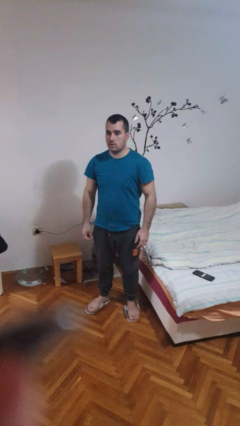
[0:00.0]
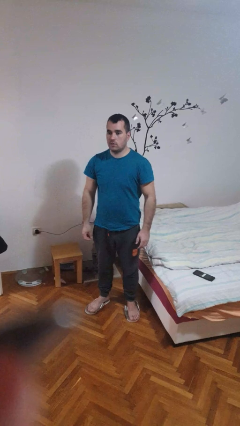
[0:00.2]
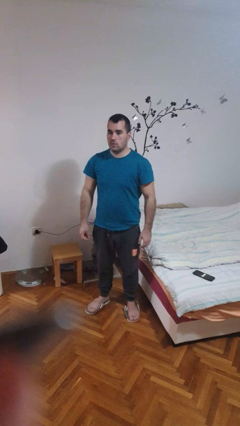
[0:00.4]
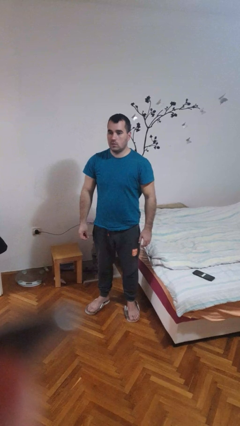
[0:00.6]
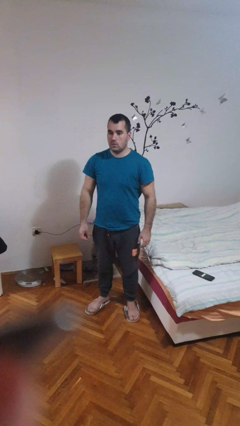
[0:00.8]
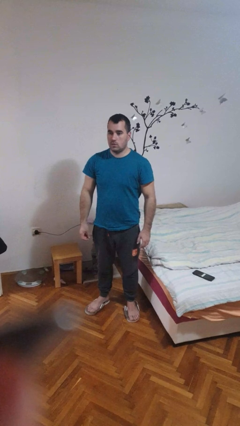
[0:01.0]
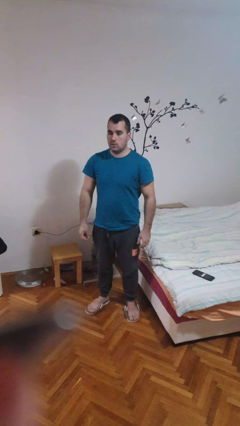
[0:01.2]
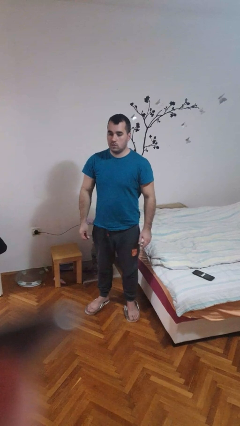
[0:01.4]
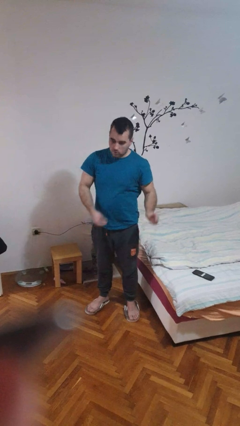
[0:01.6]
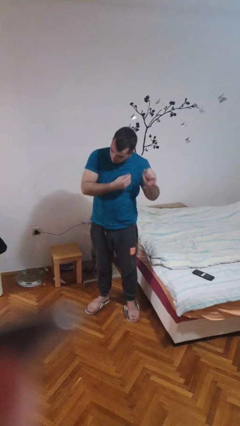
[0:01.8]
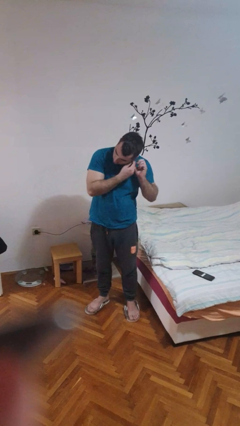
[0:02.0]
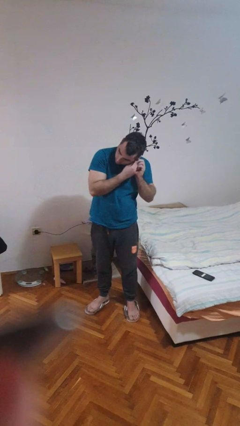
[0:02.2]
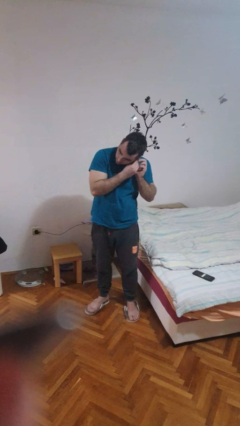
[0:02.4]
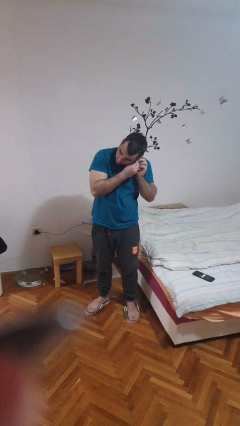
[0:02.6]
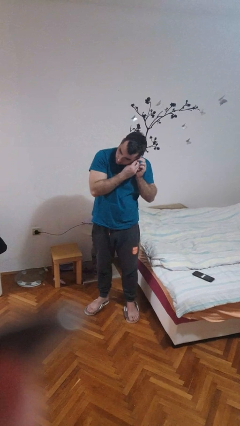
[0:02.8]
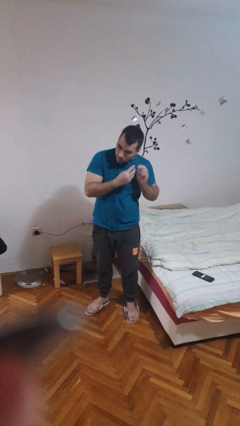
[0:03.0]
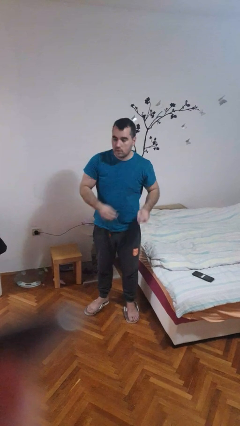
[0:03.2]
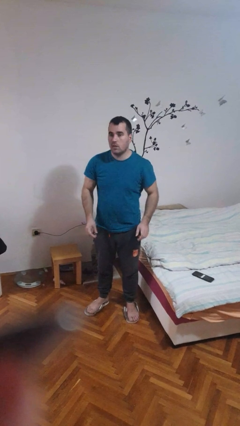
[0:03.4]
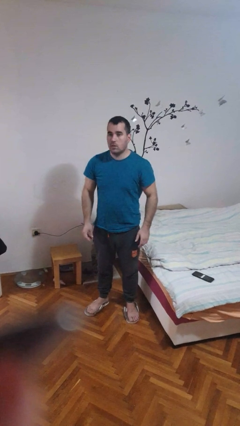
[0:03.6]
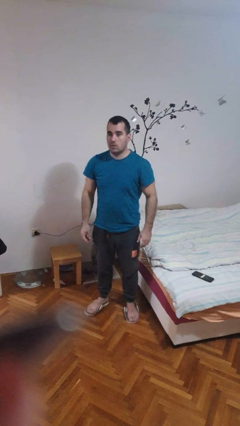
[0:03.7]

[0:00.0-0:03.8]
person puts on earrings

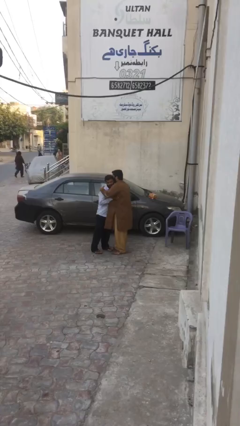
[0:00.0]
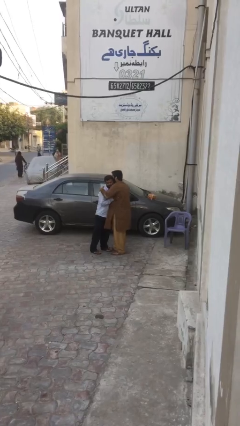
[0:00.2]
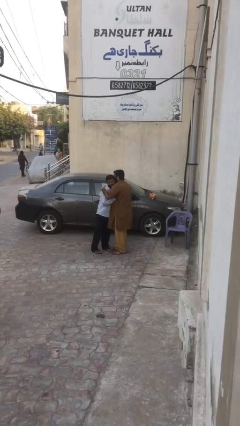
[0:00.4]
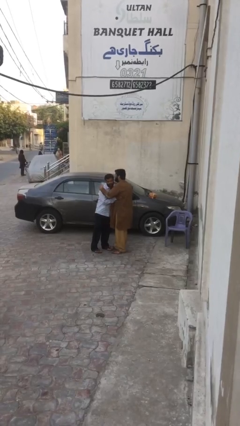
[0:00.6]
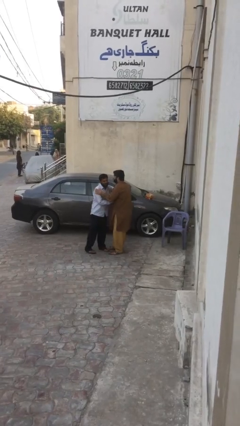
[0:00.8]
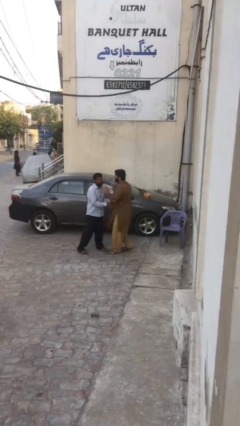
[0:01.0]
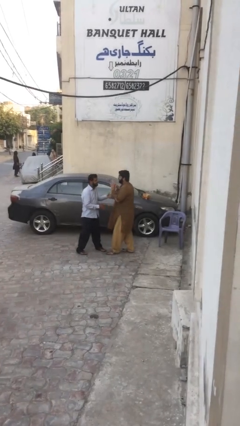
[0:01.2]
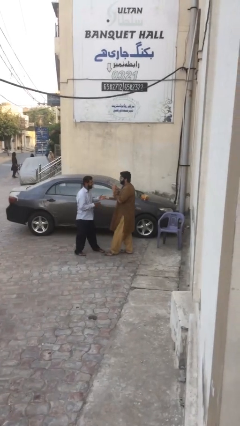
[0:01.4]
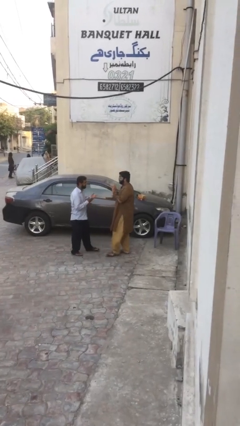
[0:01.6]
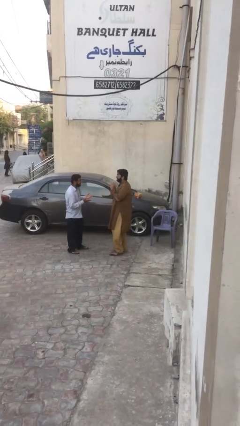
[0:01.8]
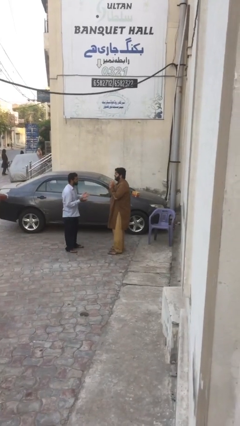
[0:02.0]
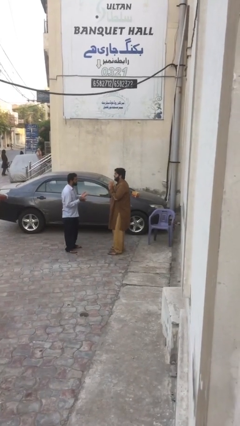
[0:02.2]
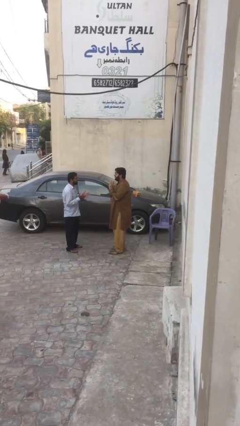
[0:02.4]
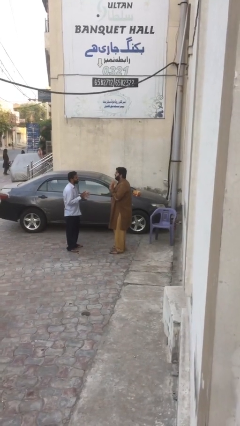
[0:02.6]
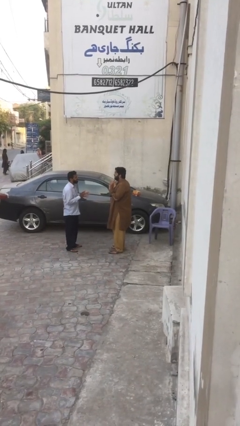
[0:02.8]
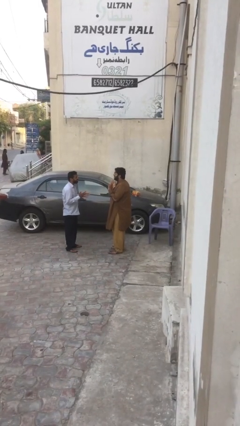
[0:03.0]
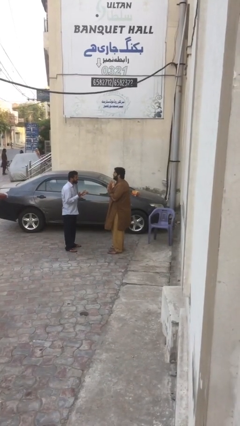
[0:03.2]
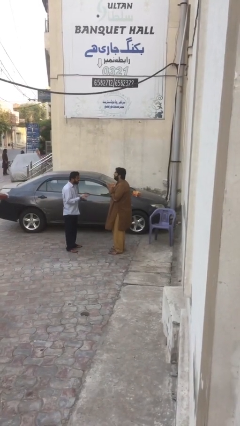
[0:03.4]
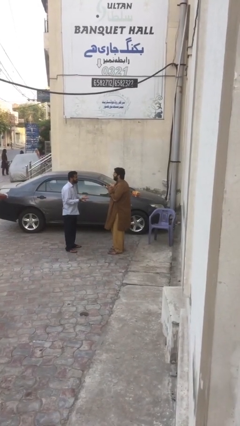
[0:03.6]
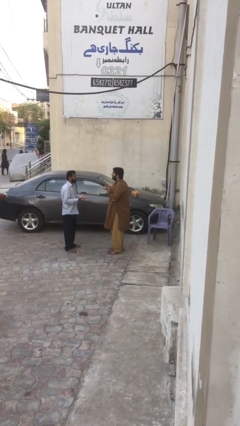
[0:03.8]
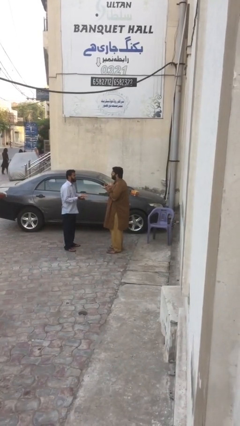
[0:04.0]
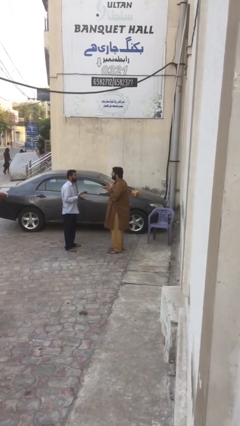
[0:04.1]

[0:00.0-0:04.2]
person talks to person

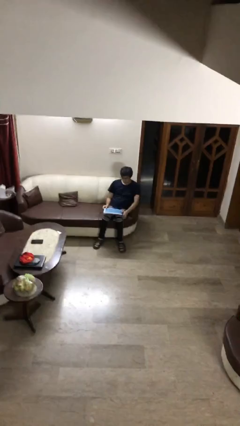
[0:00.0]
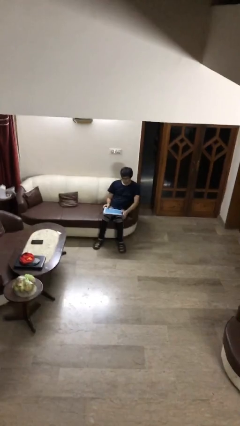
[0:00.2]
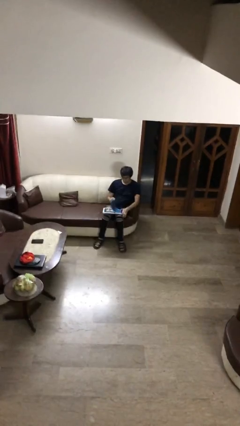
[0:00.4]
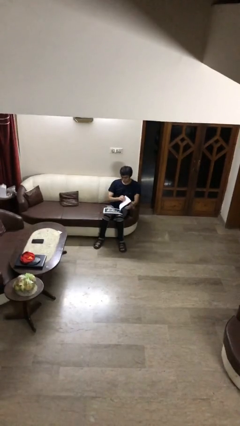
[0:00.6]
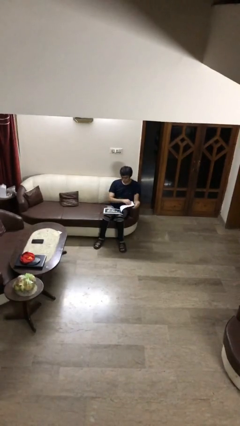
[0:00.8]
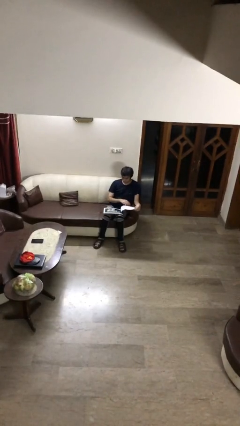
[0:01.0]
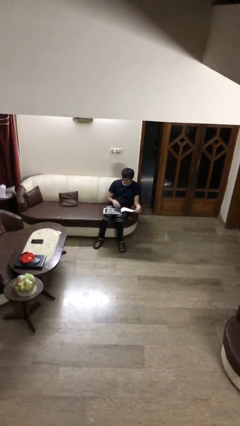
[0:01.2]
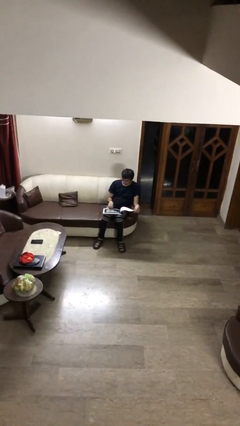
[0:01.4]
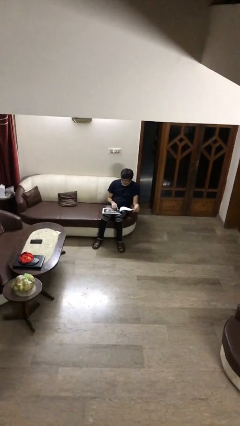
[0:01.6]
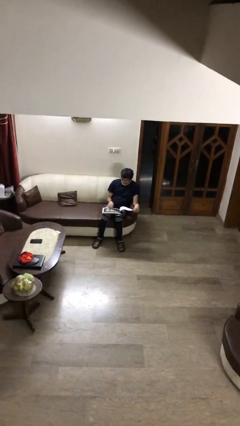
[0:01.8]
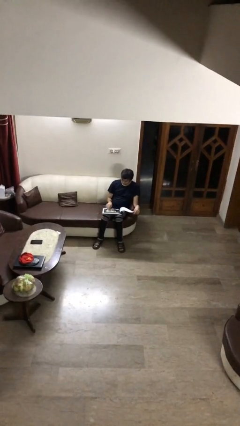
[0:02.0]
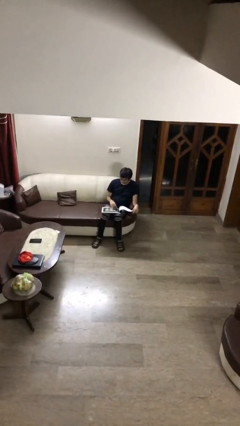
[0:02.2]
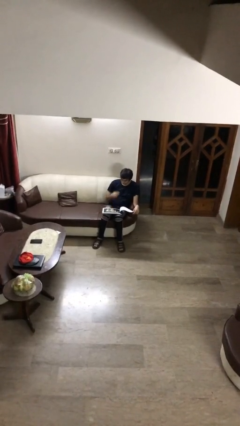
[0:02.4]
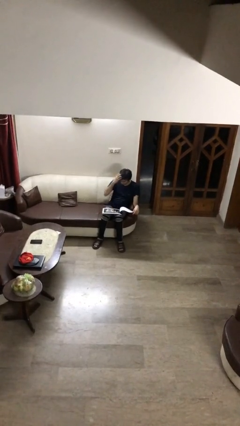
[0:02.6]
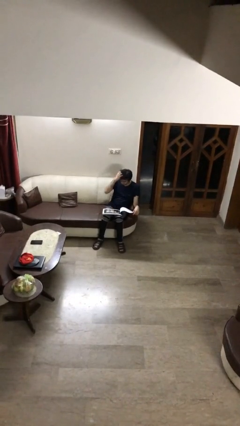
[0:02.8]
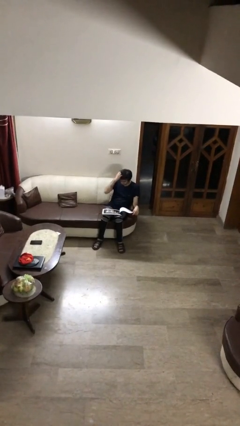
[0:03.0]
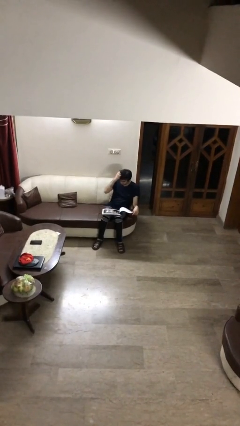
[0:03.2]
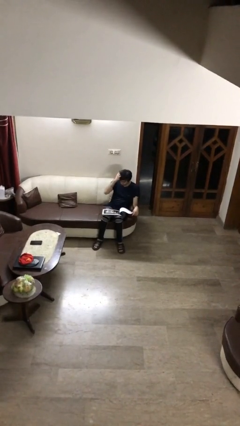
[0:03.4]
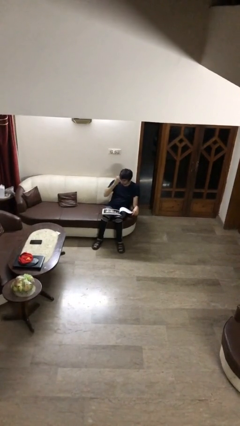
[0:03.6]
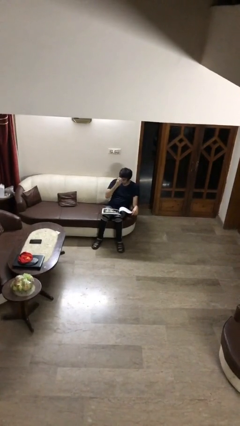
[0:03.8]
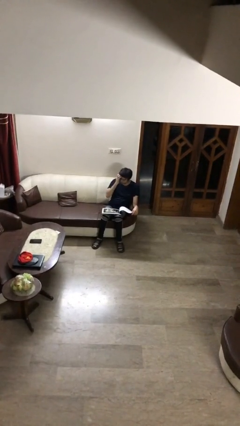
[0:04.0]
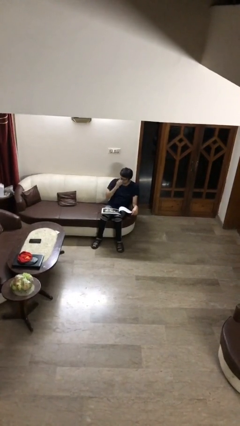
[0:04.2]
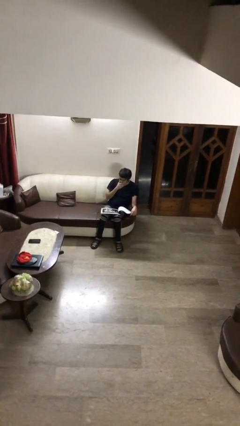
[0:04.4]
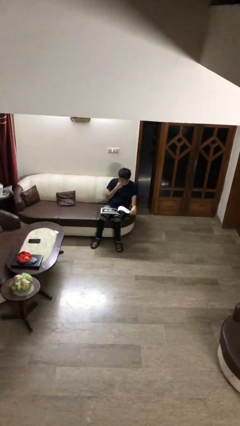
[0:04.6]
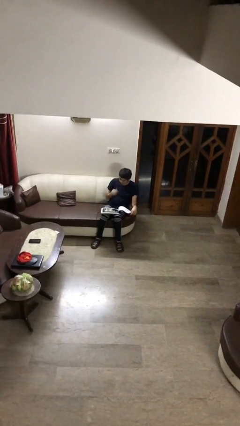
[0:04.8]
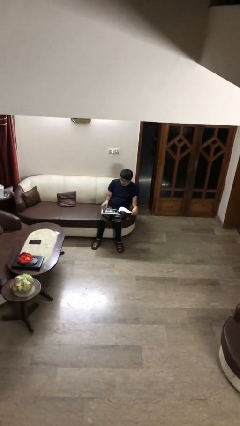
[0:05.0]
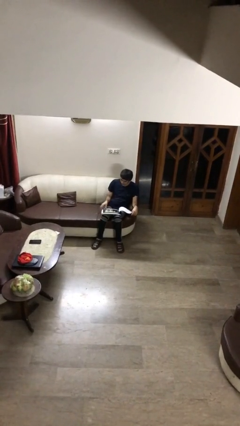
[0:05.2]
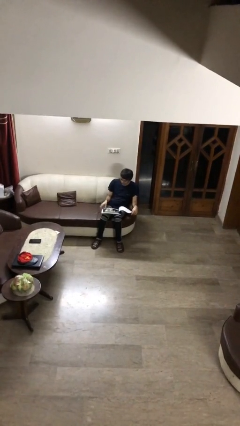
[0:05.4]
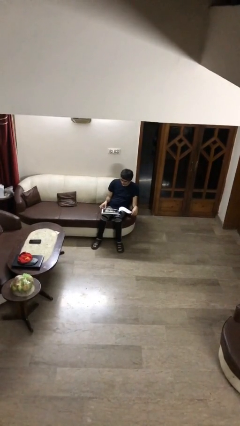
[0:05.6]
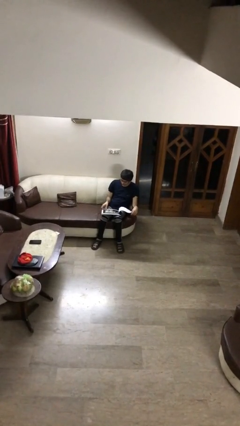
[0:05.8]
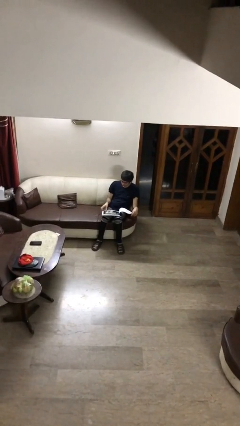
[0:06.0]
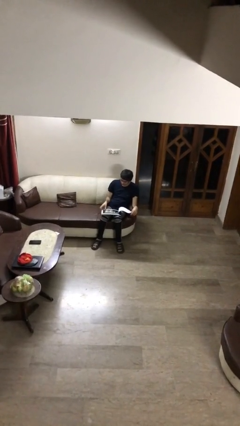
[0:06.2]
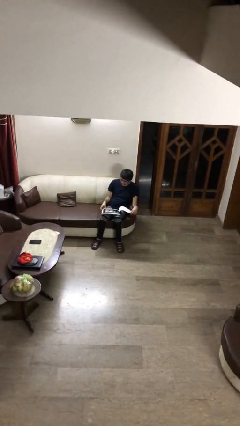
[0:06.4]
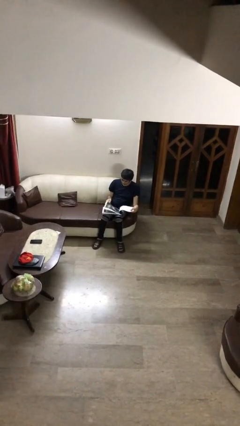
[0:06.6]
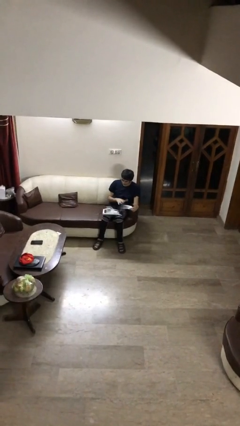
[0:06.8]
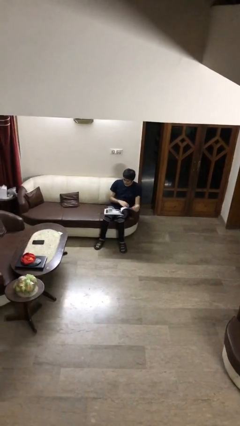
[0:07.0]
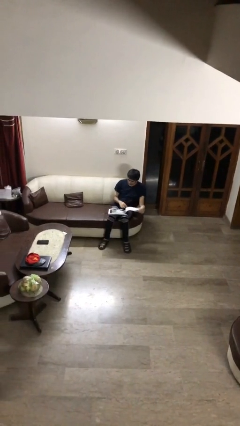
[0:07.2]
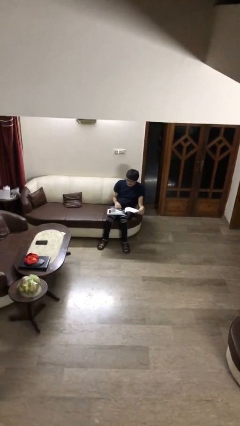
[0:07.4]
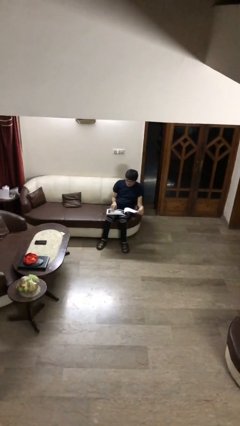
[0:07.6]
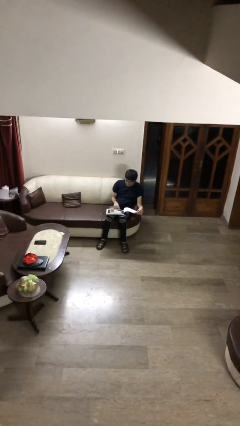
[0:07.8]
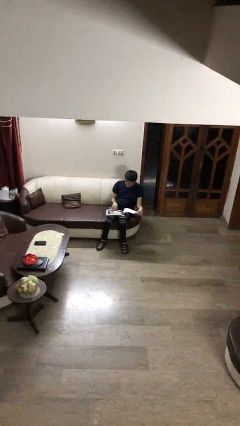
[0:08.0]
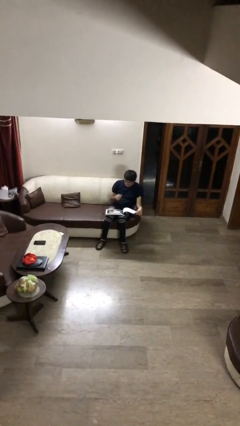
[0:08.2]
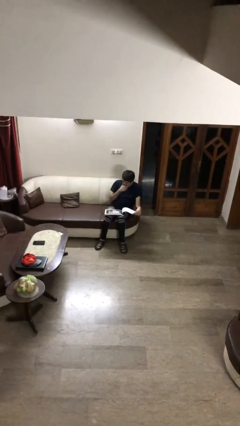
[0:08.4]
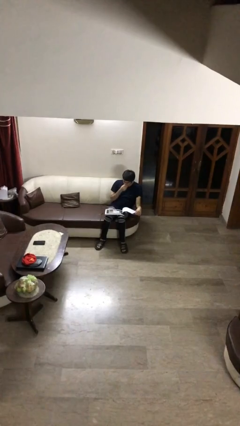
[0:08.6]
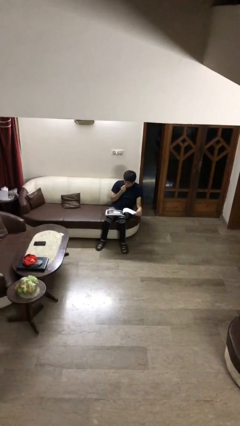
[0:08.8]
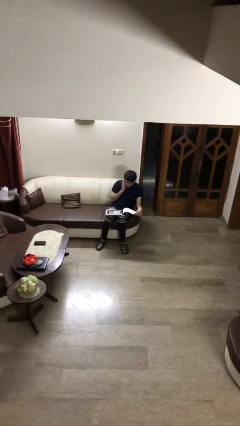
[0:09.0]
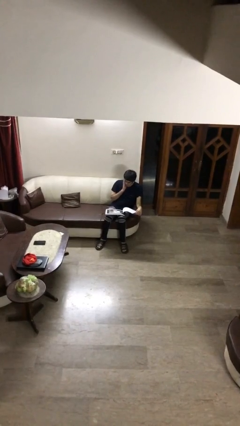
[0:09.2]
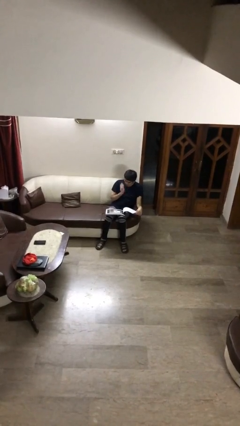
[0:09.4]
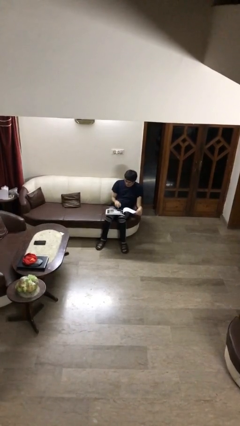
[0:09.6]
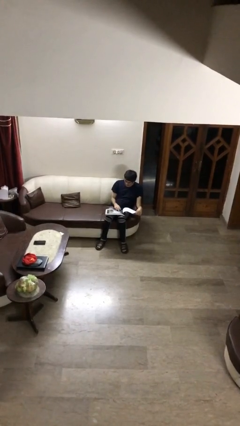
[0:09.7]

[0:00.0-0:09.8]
person reads document
